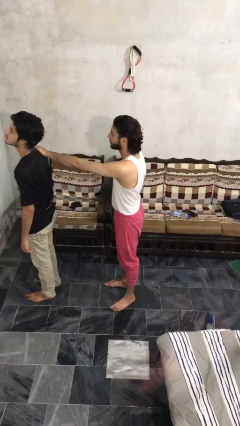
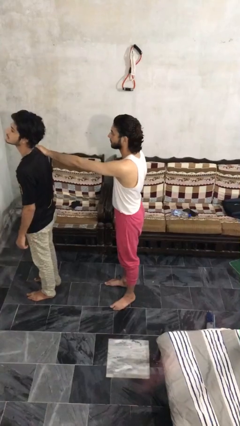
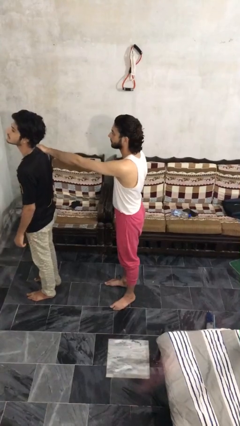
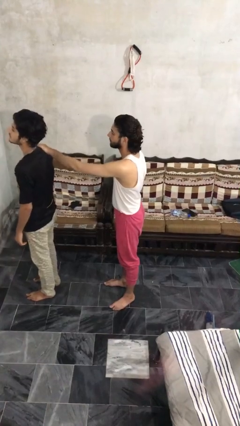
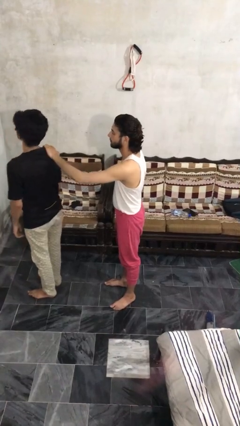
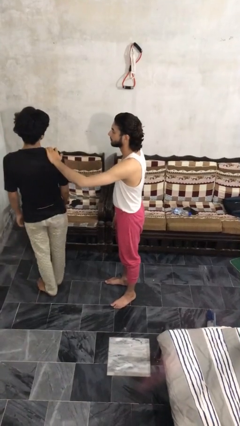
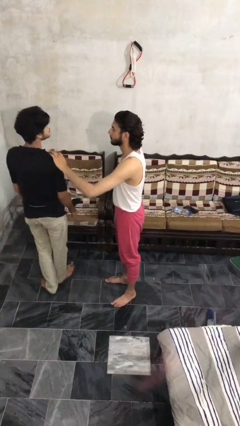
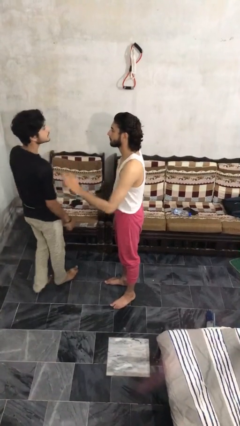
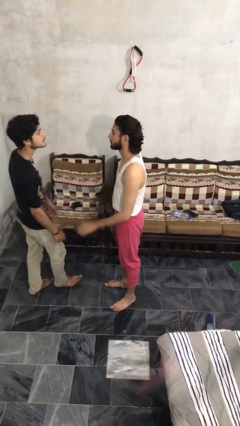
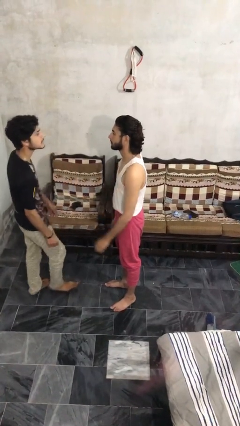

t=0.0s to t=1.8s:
person spins person around

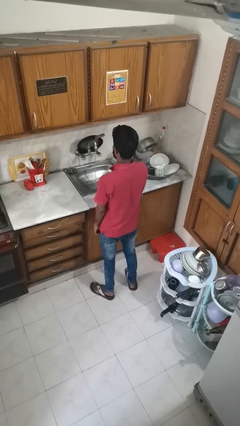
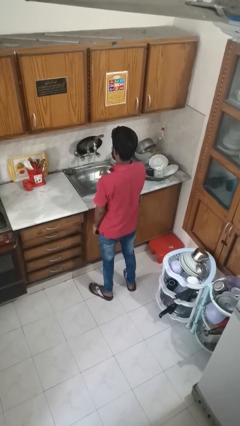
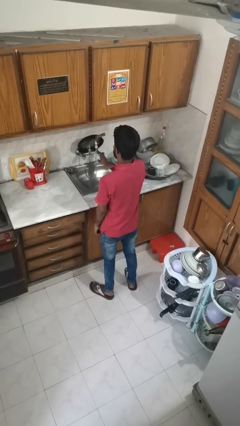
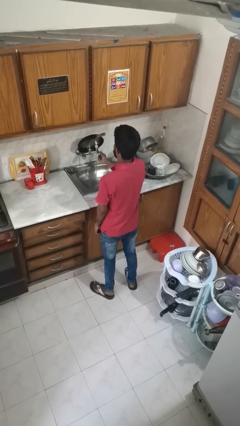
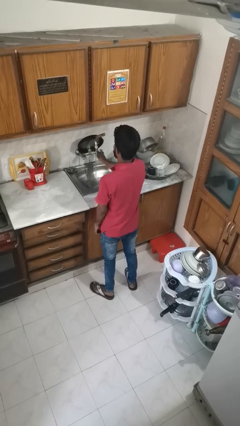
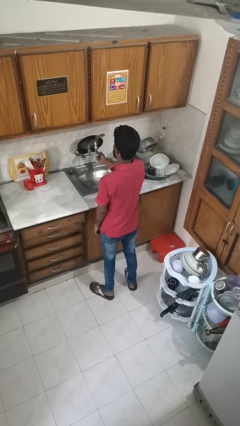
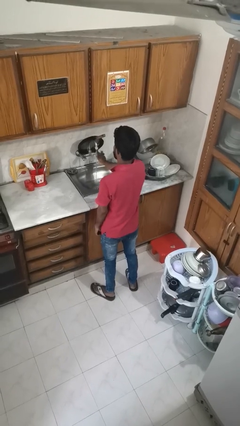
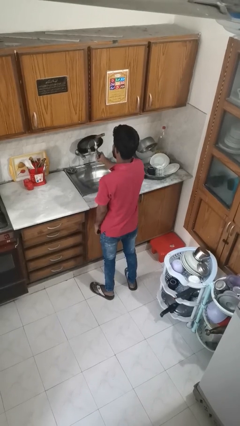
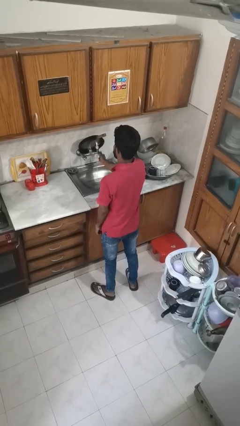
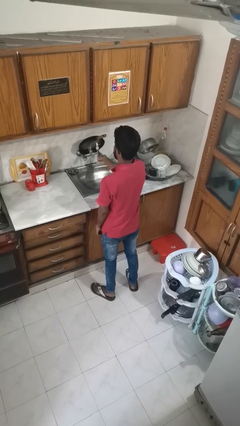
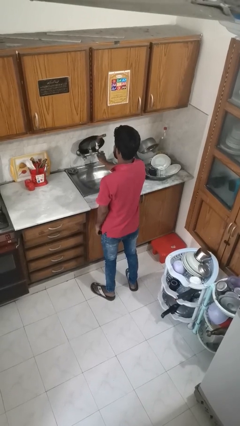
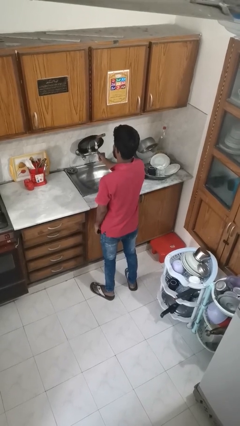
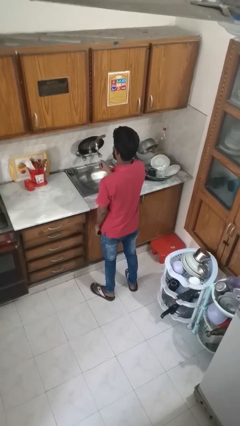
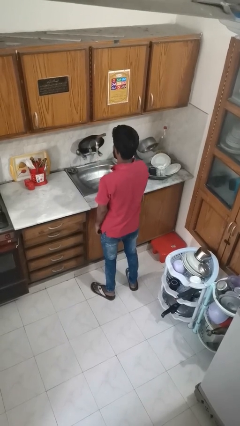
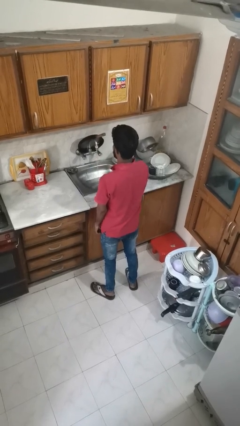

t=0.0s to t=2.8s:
person turns off faucet

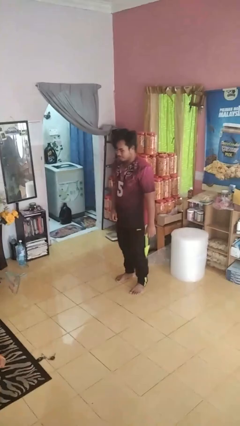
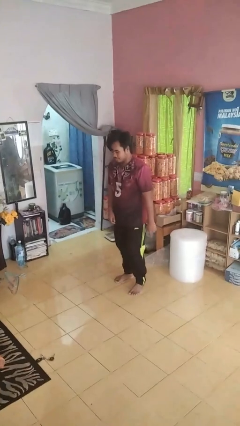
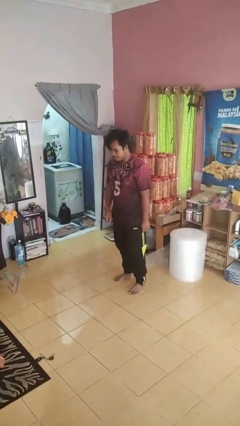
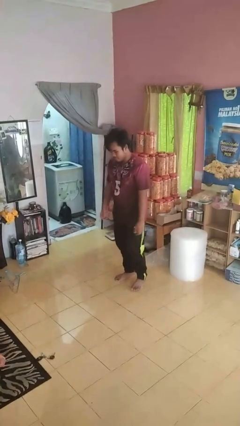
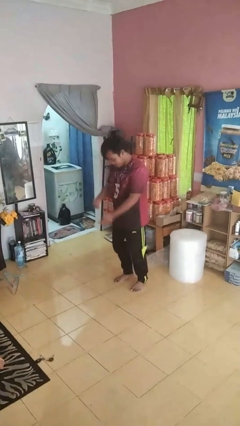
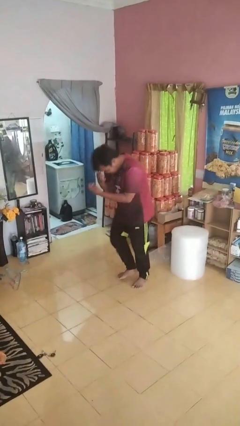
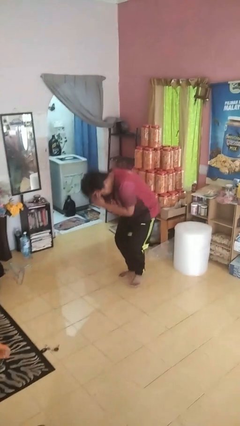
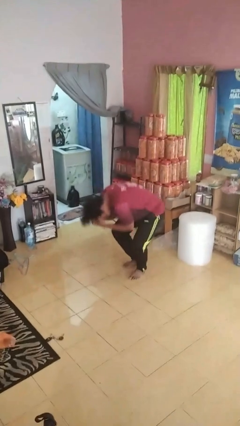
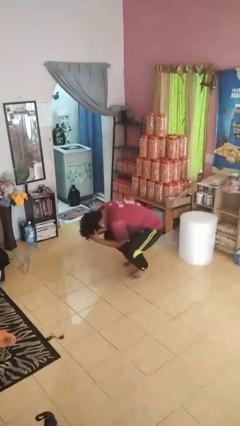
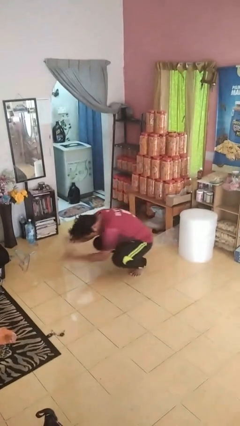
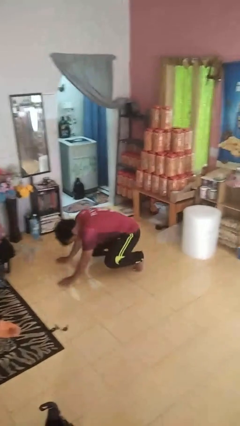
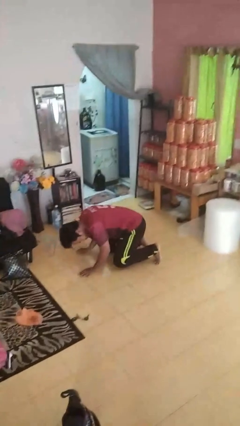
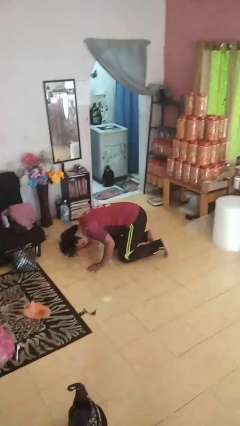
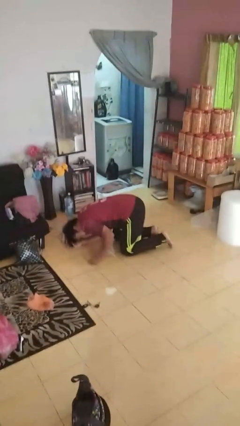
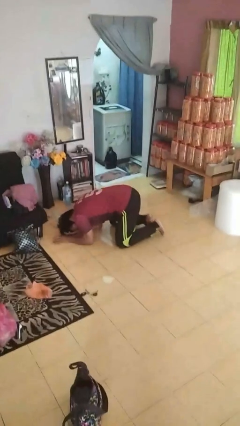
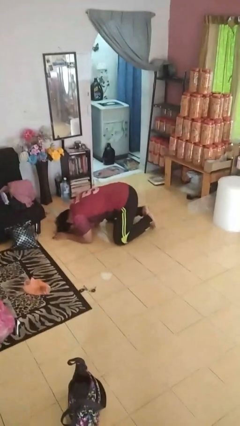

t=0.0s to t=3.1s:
person falls while standing

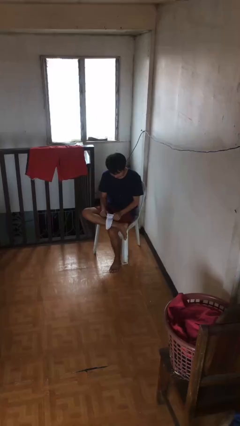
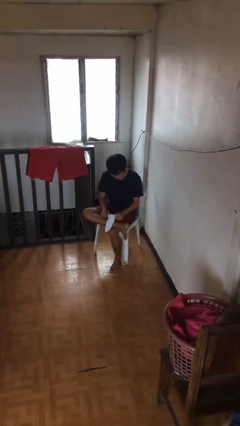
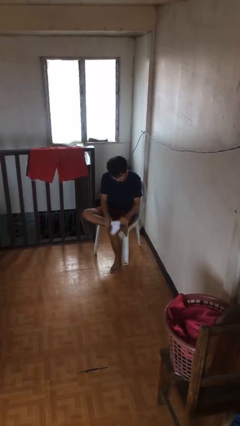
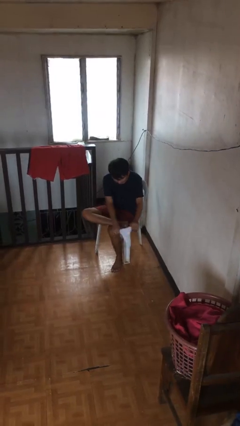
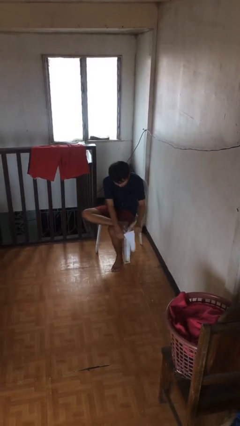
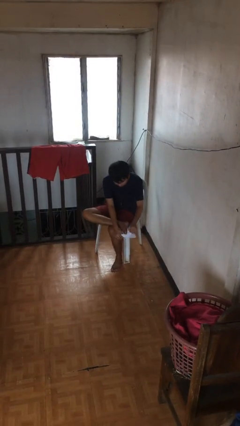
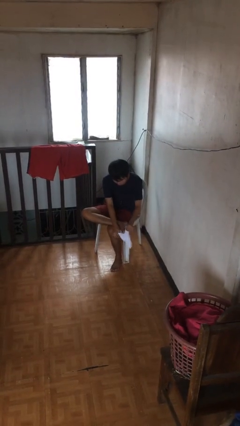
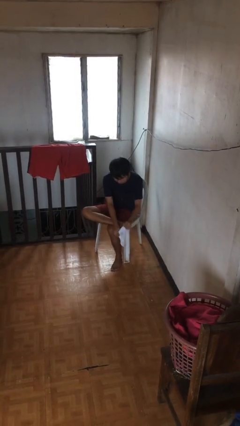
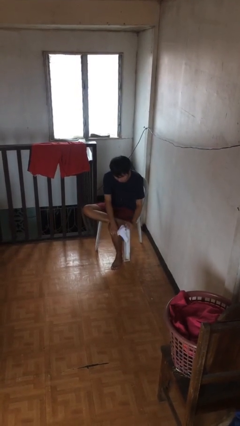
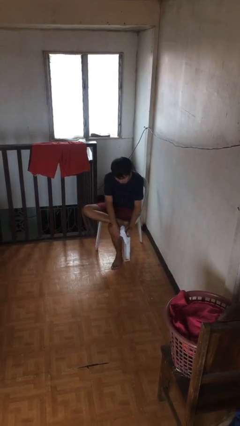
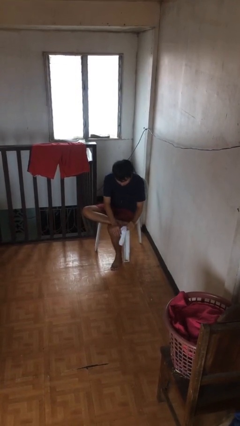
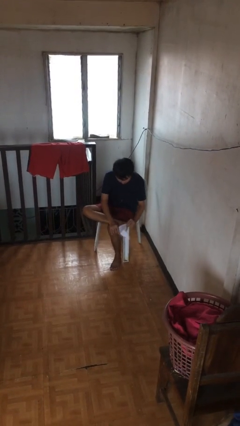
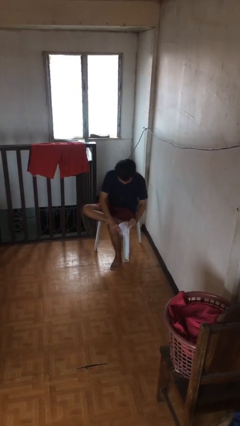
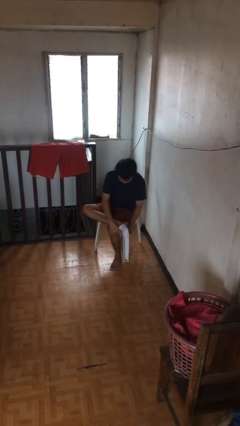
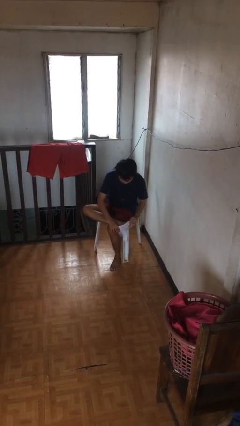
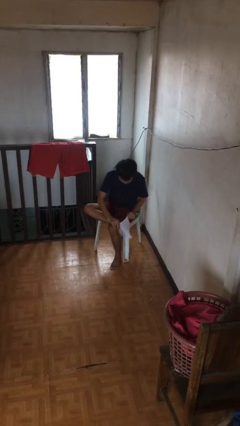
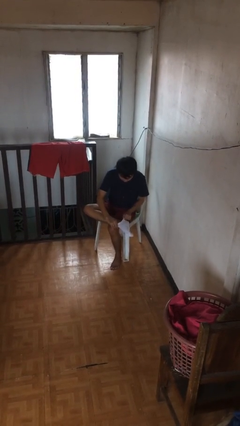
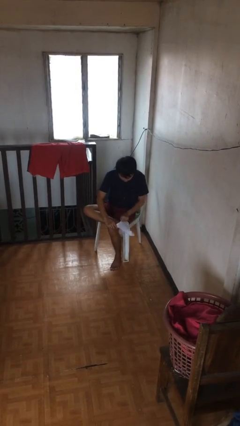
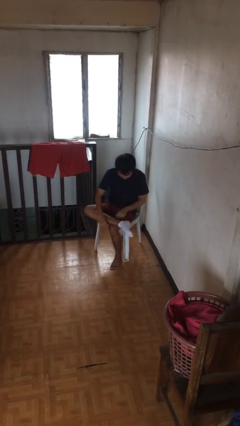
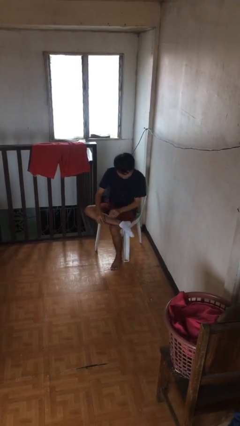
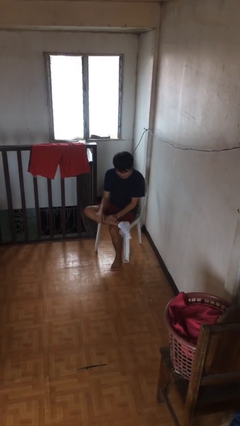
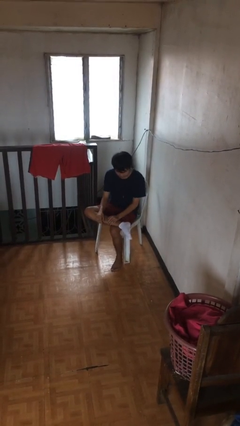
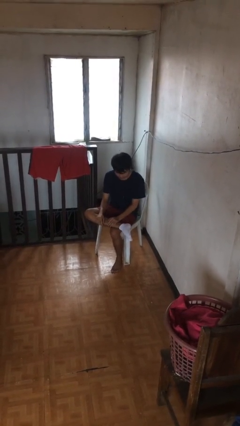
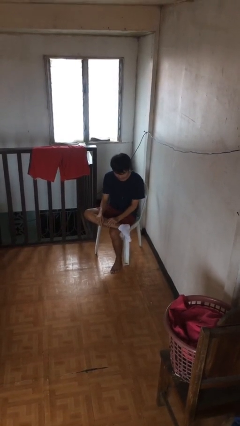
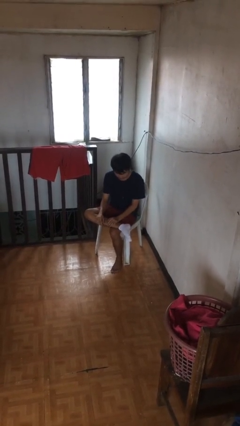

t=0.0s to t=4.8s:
person puts on socks

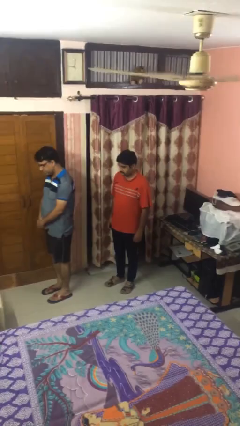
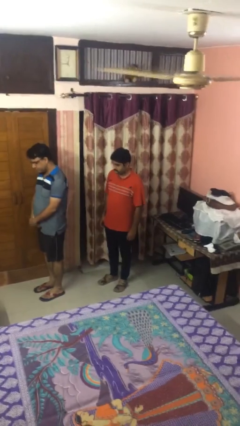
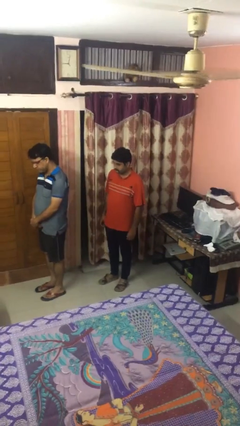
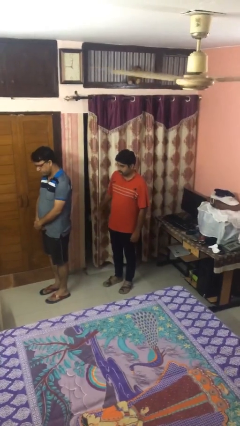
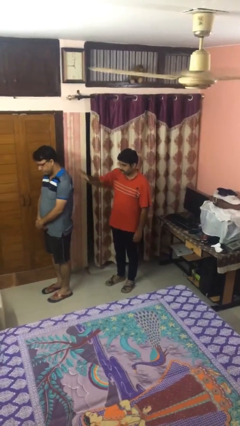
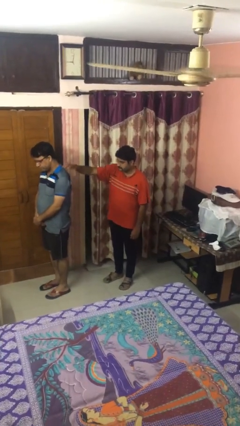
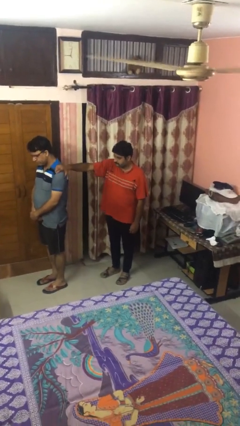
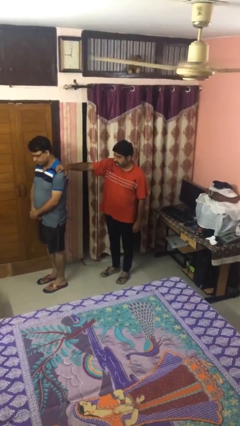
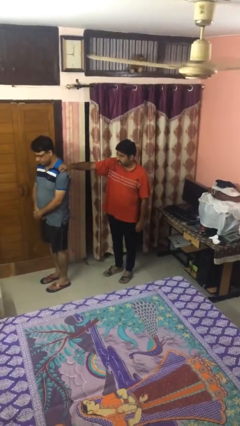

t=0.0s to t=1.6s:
person grabs person by shoulder

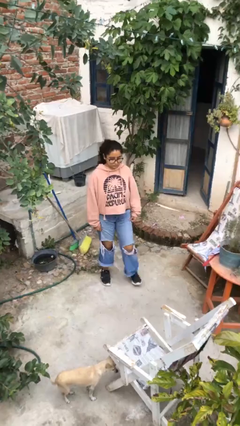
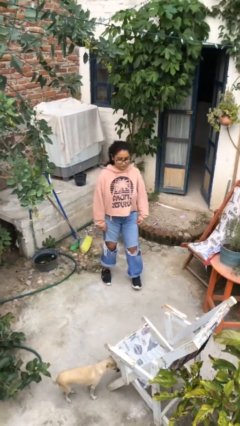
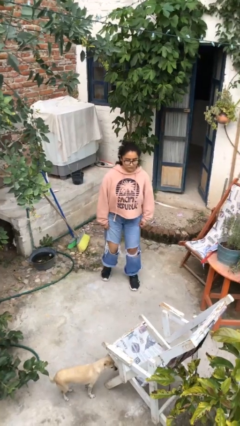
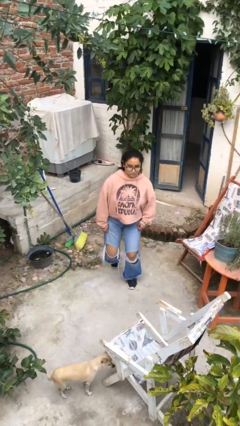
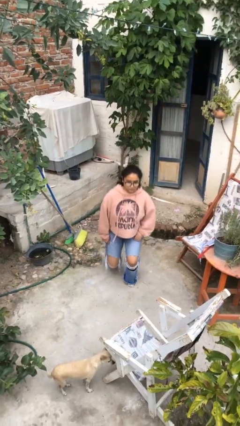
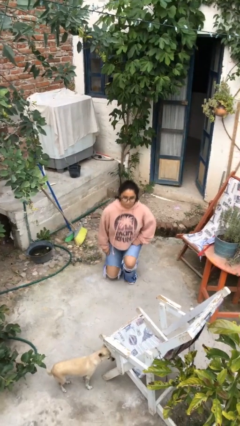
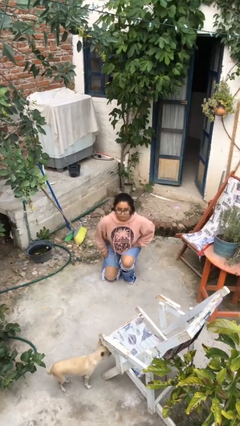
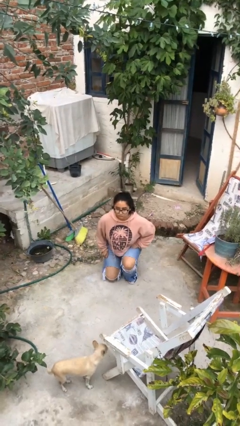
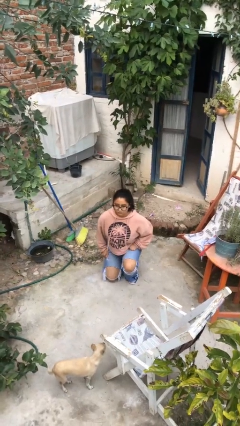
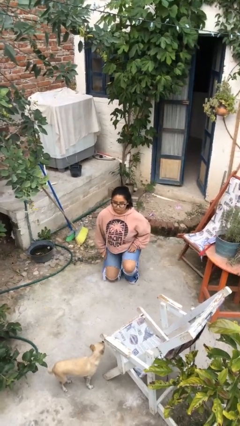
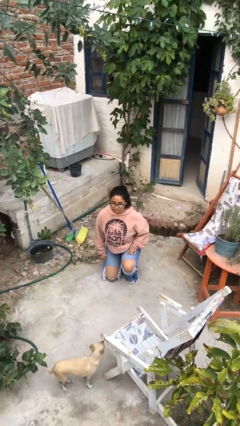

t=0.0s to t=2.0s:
person kneels

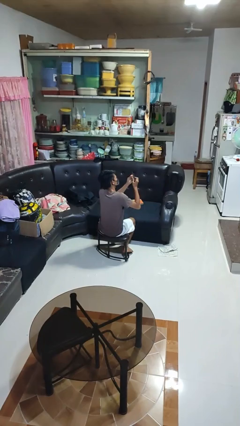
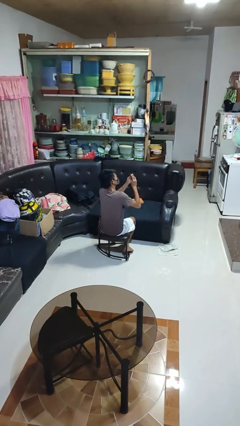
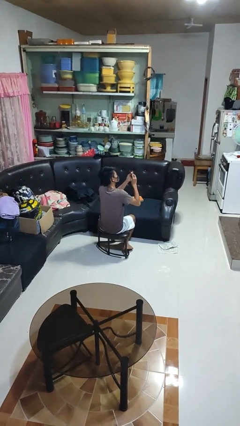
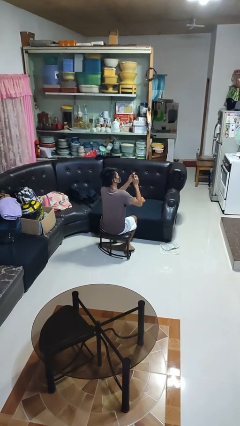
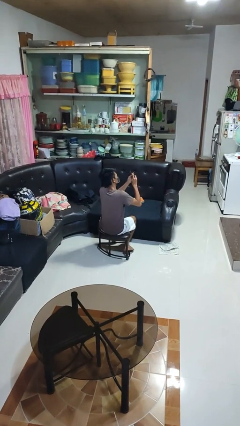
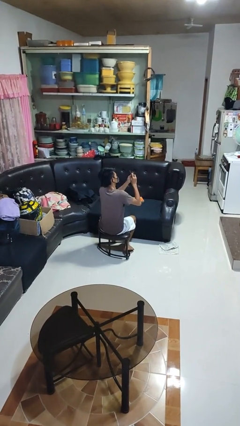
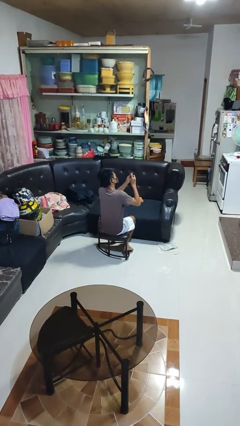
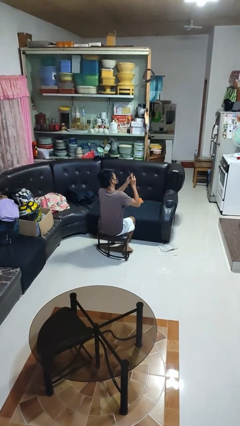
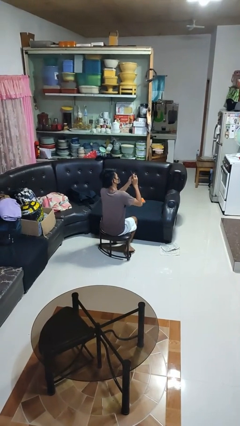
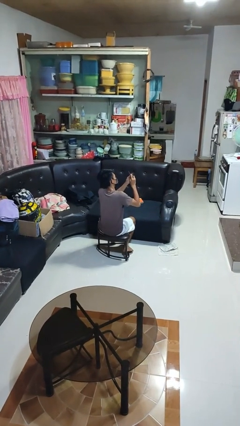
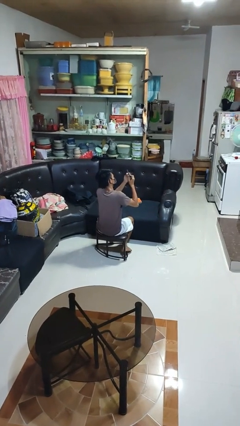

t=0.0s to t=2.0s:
person files fingernails
